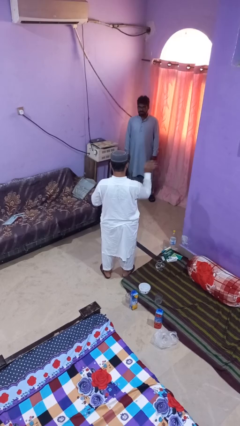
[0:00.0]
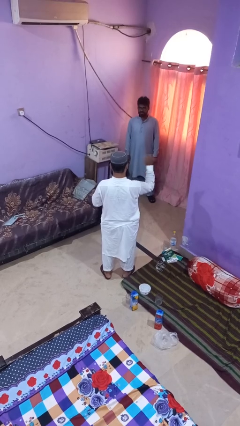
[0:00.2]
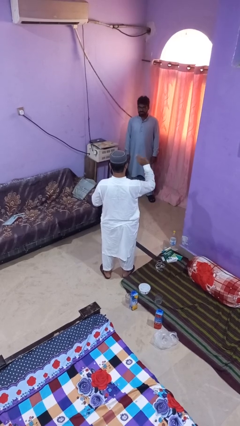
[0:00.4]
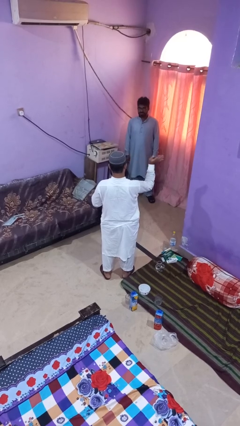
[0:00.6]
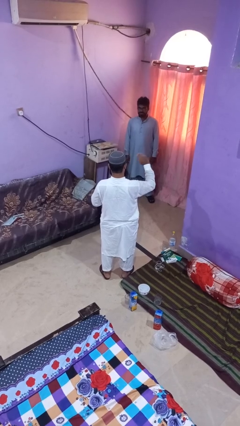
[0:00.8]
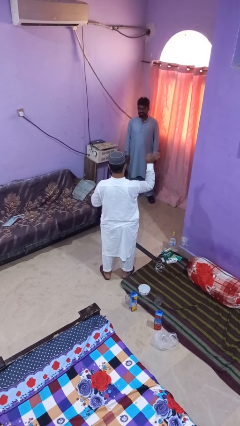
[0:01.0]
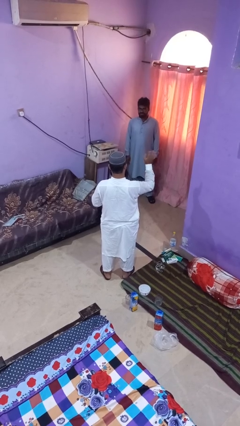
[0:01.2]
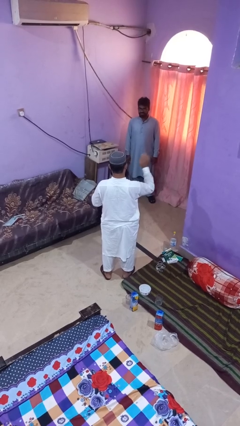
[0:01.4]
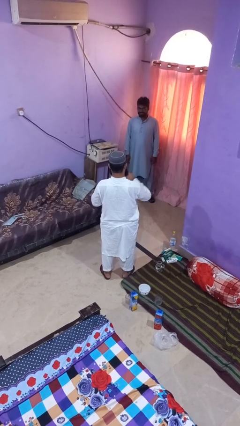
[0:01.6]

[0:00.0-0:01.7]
person waves at person

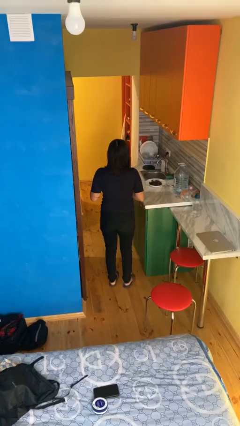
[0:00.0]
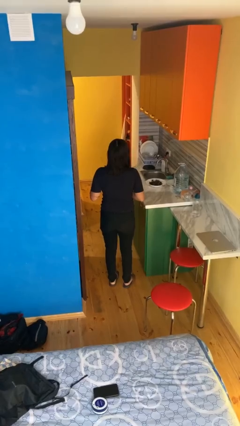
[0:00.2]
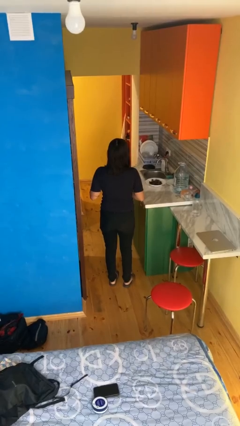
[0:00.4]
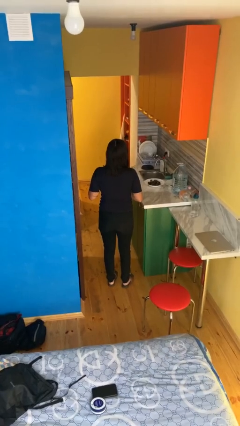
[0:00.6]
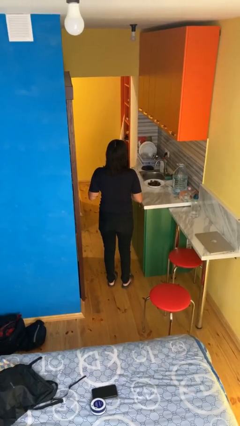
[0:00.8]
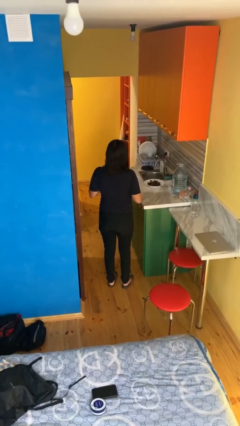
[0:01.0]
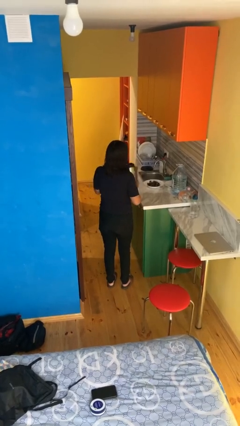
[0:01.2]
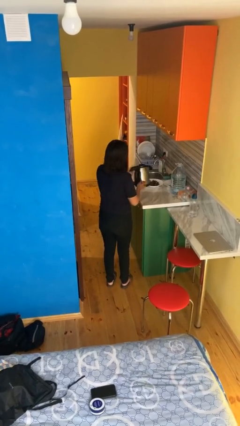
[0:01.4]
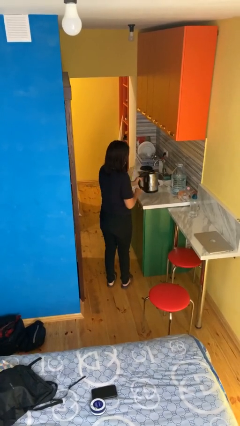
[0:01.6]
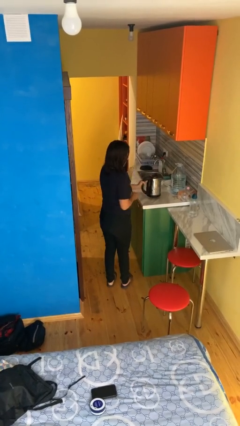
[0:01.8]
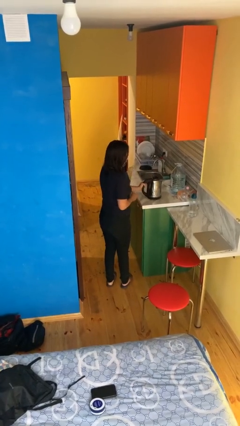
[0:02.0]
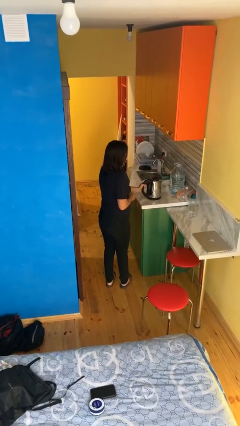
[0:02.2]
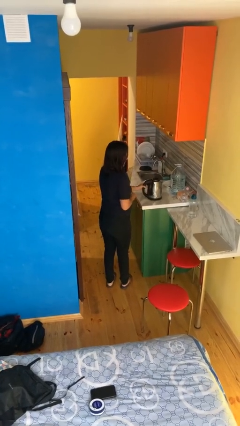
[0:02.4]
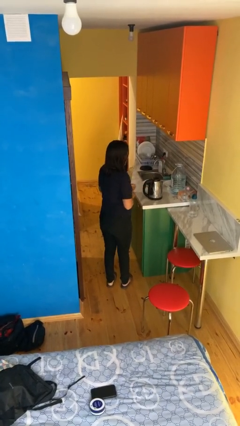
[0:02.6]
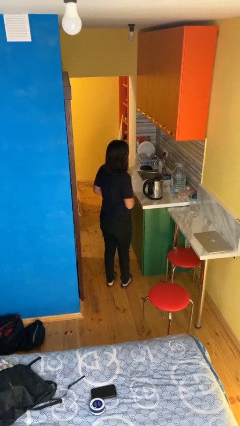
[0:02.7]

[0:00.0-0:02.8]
person puts down object on countertop

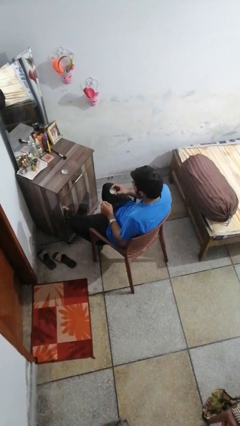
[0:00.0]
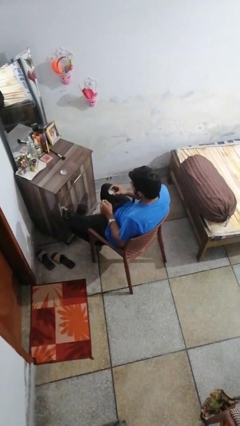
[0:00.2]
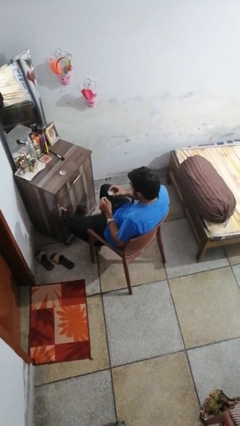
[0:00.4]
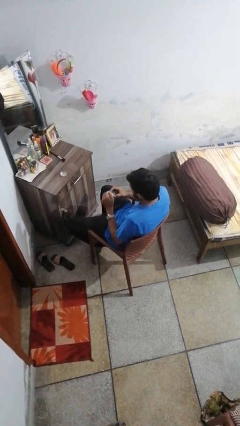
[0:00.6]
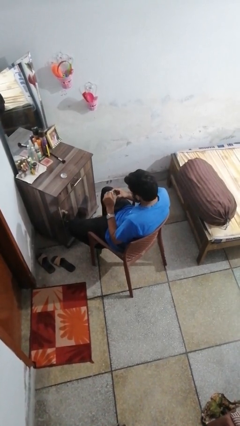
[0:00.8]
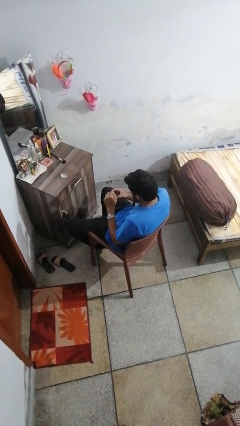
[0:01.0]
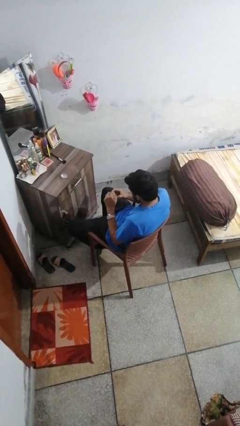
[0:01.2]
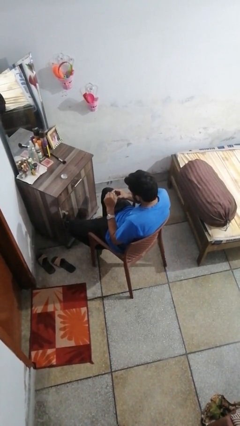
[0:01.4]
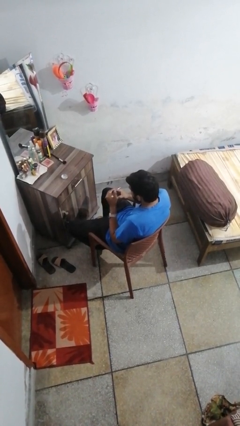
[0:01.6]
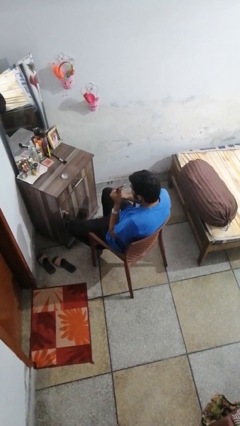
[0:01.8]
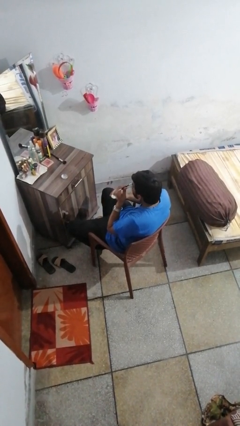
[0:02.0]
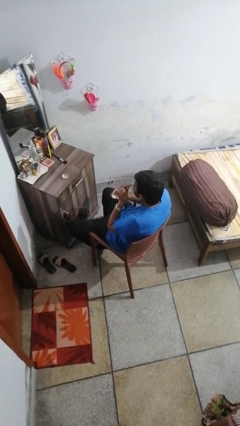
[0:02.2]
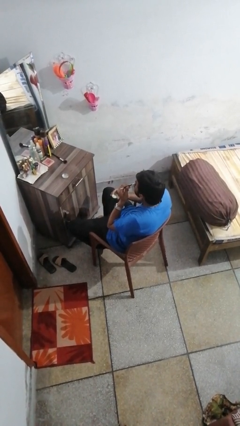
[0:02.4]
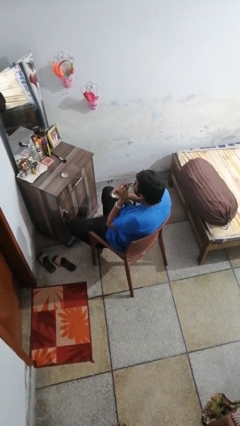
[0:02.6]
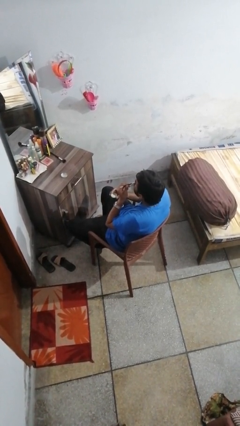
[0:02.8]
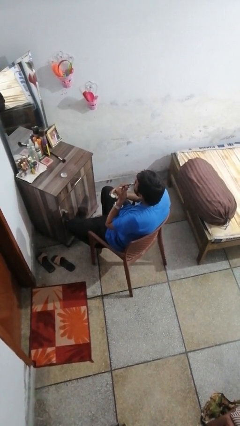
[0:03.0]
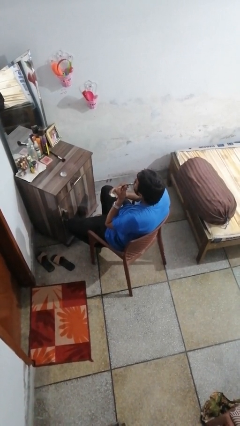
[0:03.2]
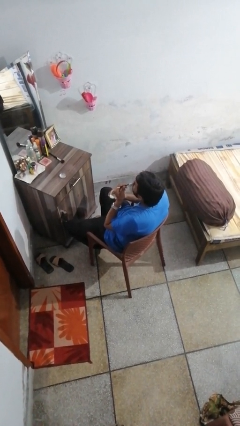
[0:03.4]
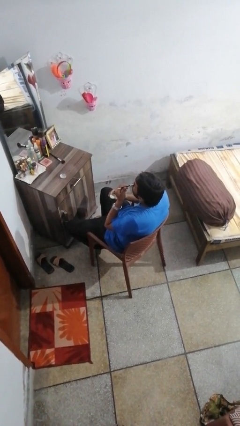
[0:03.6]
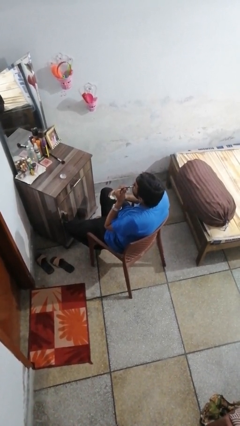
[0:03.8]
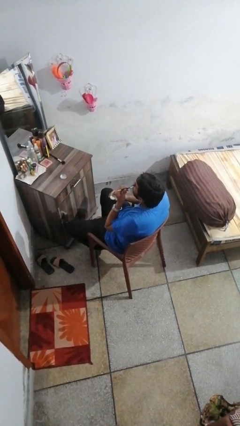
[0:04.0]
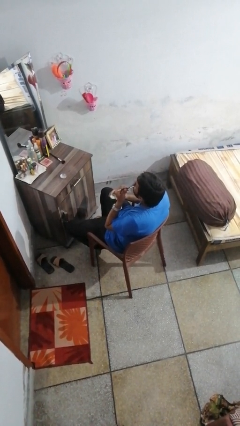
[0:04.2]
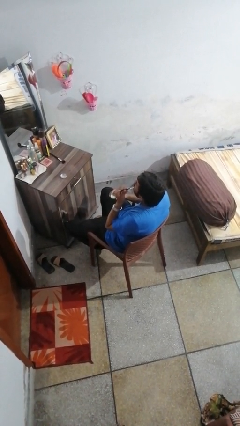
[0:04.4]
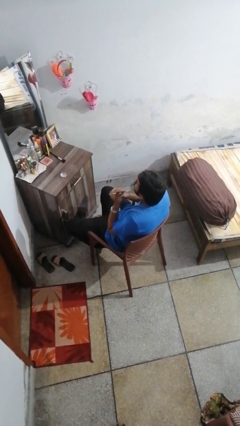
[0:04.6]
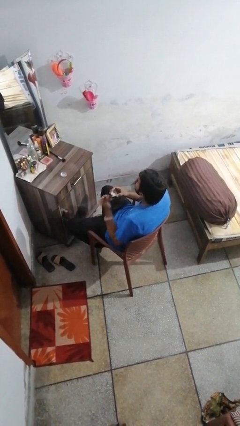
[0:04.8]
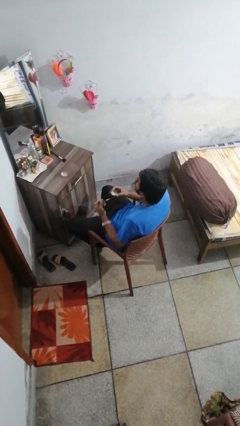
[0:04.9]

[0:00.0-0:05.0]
person applies eye makeup

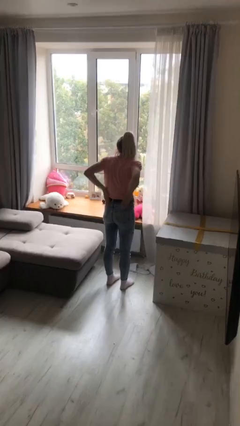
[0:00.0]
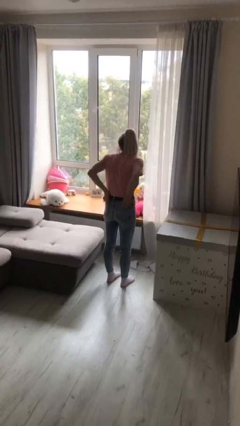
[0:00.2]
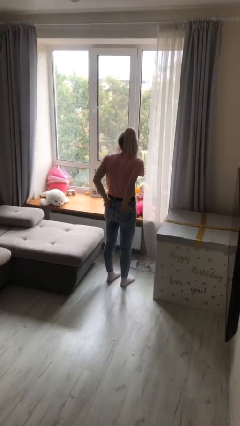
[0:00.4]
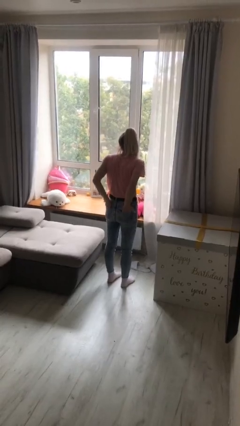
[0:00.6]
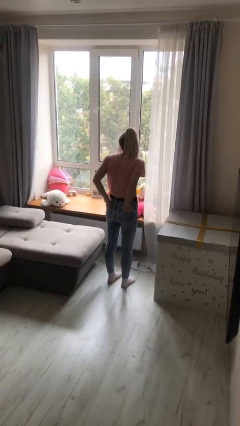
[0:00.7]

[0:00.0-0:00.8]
person puts hands in back pockets

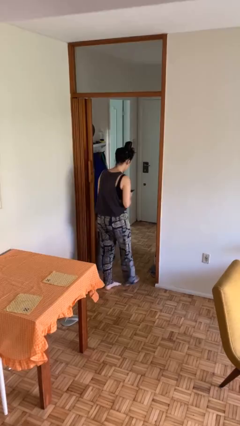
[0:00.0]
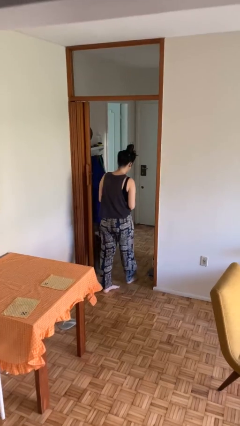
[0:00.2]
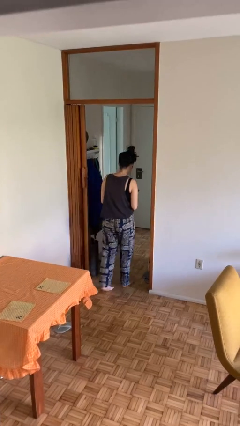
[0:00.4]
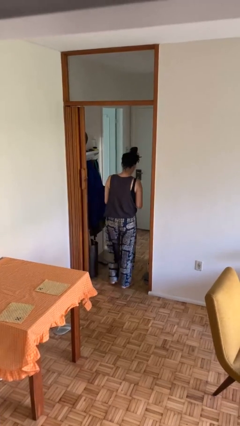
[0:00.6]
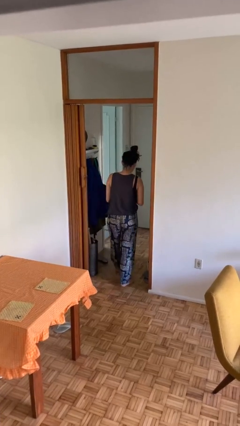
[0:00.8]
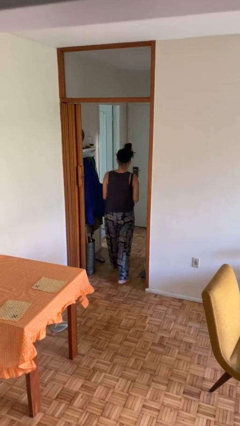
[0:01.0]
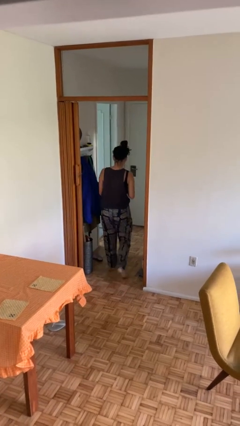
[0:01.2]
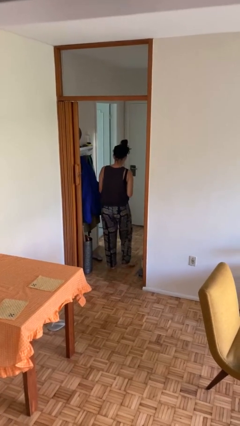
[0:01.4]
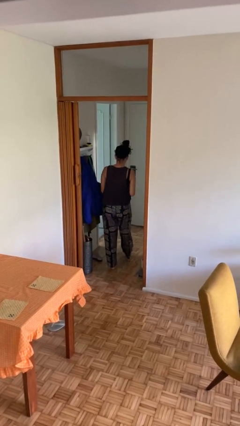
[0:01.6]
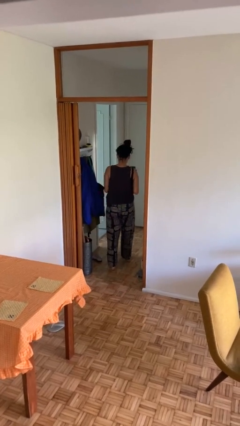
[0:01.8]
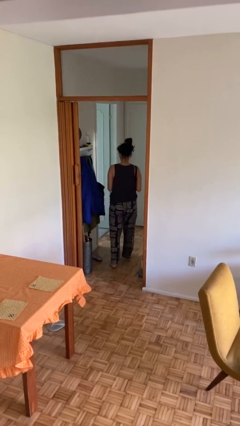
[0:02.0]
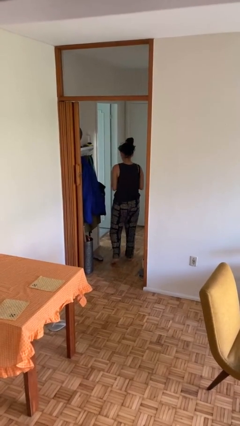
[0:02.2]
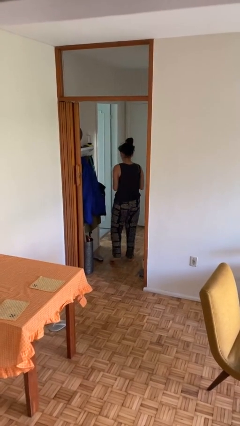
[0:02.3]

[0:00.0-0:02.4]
person exits scene through structure

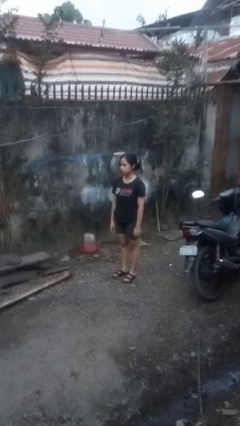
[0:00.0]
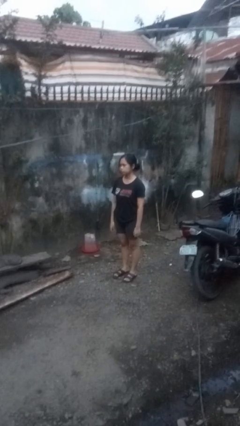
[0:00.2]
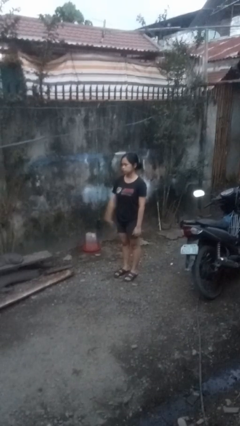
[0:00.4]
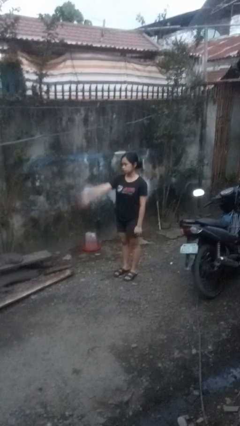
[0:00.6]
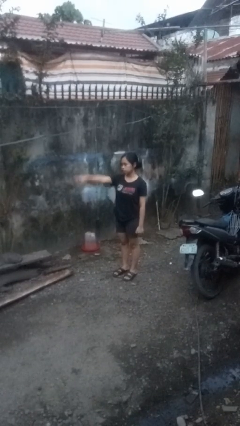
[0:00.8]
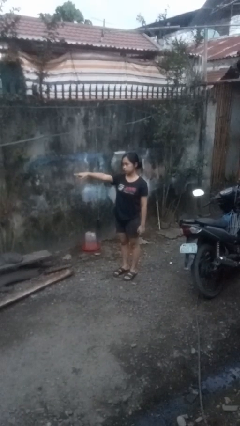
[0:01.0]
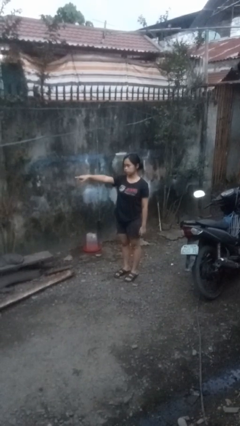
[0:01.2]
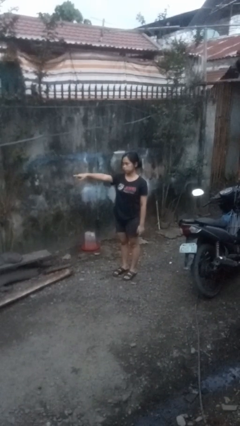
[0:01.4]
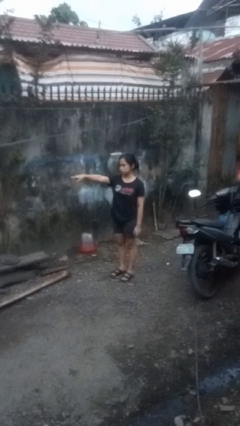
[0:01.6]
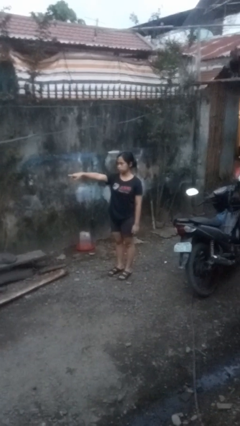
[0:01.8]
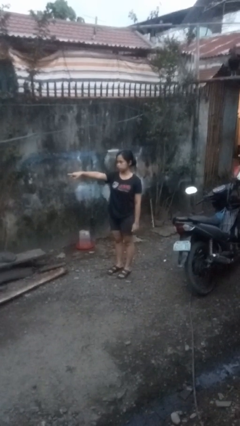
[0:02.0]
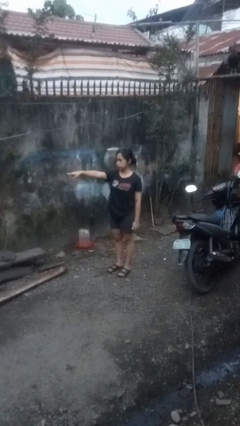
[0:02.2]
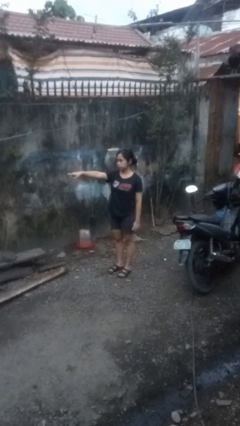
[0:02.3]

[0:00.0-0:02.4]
person points at person

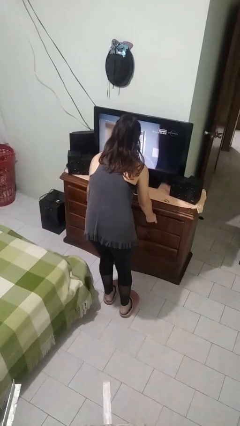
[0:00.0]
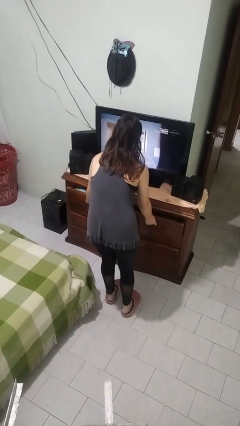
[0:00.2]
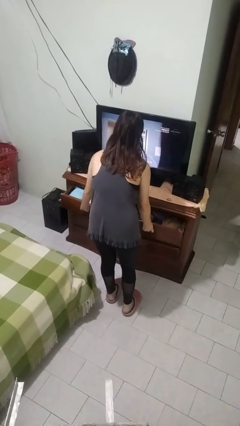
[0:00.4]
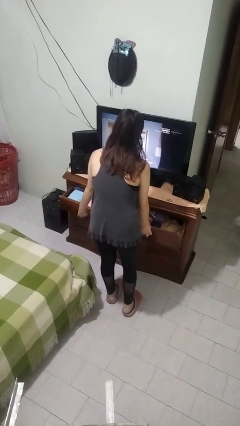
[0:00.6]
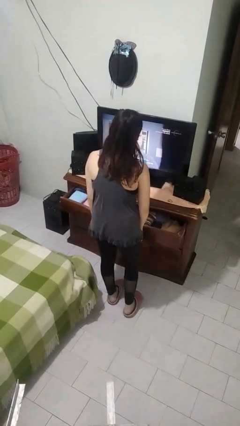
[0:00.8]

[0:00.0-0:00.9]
person opens dresser drawer

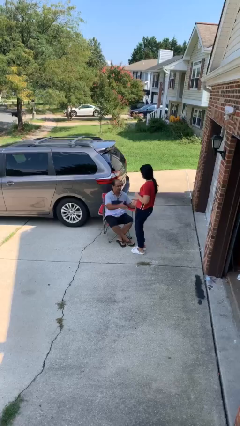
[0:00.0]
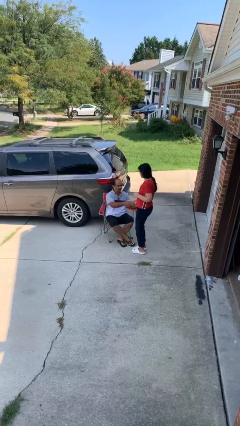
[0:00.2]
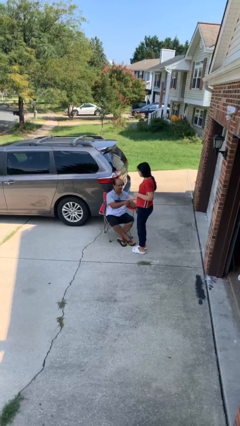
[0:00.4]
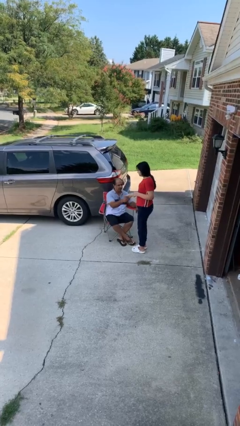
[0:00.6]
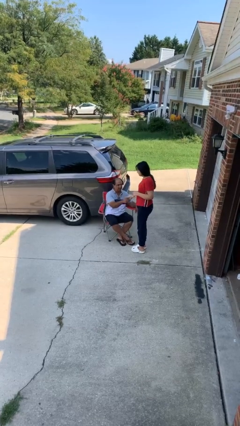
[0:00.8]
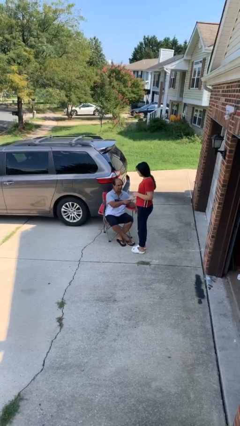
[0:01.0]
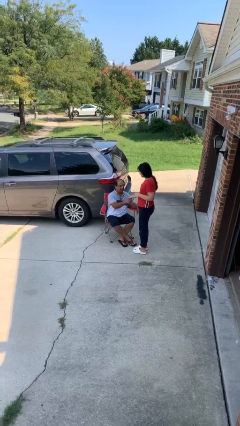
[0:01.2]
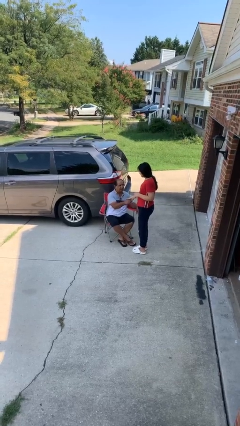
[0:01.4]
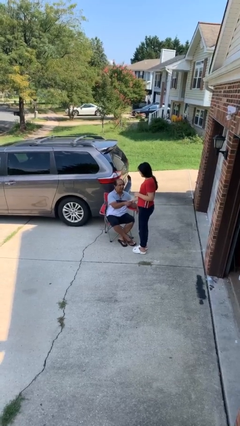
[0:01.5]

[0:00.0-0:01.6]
person shakes hand
